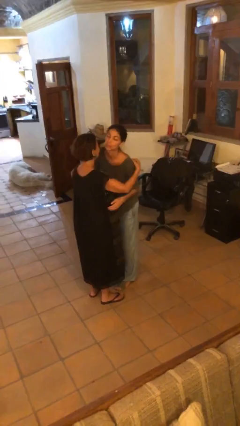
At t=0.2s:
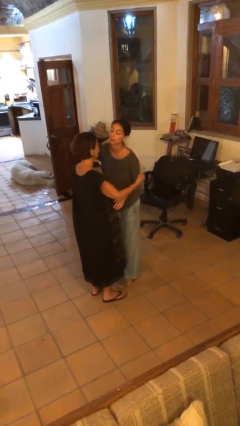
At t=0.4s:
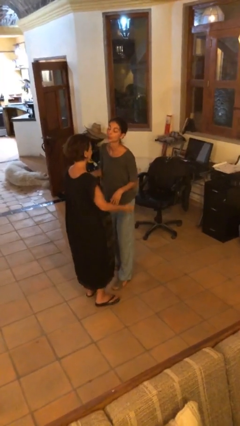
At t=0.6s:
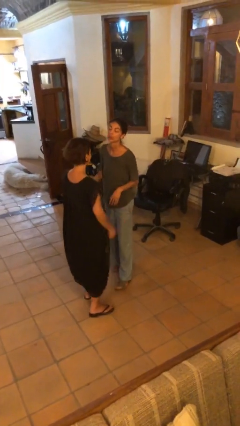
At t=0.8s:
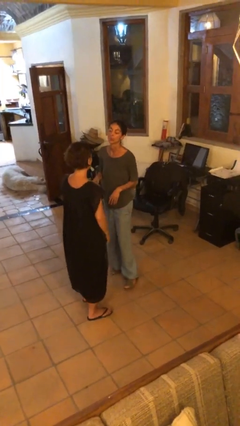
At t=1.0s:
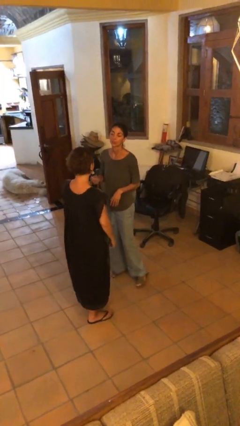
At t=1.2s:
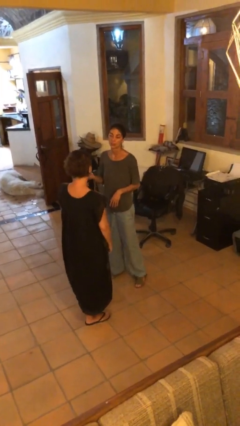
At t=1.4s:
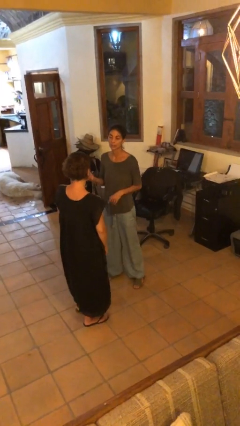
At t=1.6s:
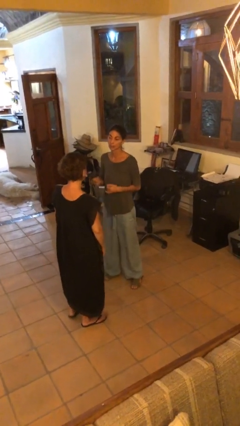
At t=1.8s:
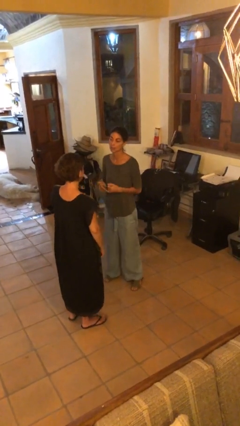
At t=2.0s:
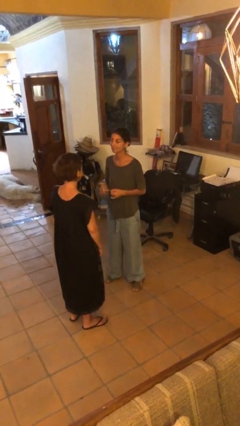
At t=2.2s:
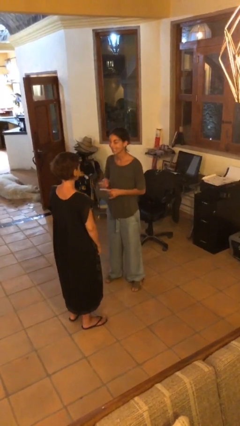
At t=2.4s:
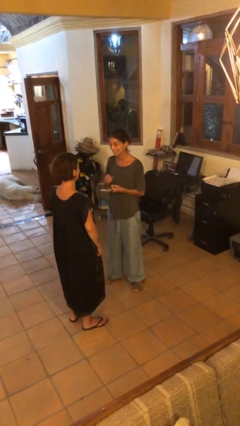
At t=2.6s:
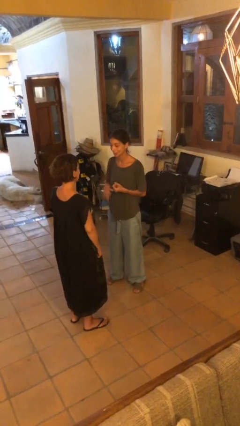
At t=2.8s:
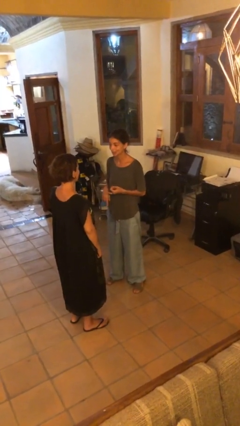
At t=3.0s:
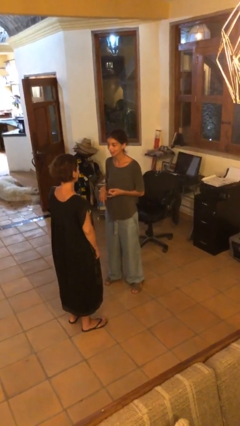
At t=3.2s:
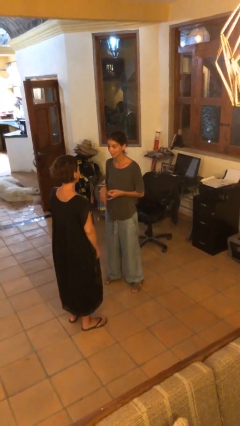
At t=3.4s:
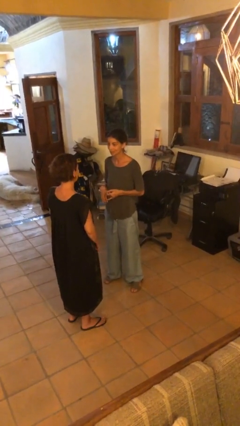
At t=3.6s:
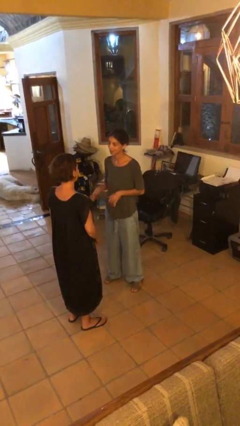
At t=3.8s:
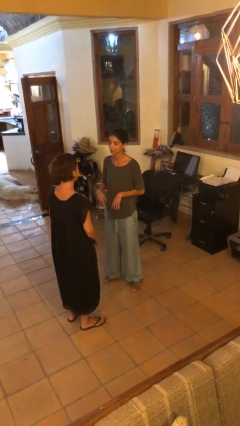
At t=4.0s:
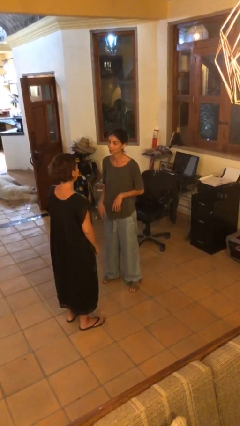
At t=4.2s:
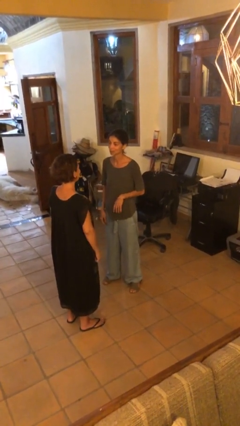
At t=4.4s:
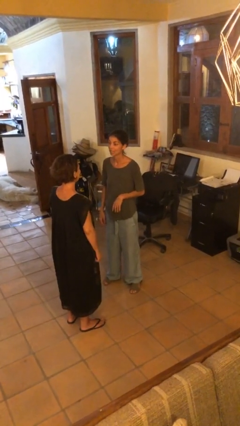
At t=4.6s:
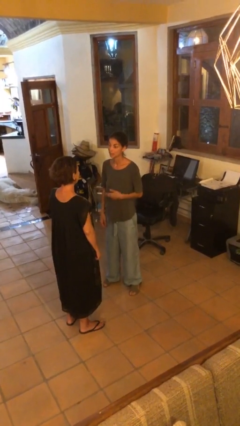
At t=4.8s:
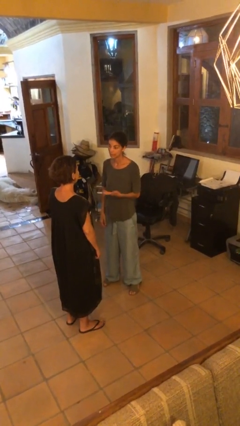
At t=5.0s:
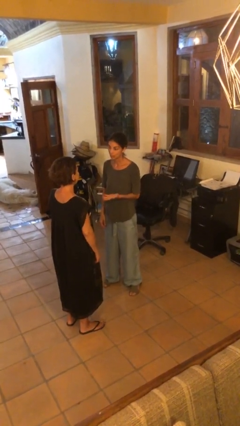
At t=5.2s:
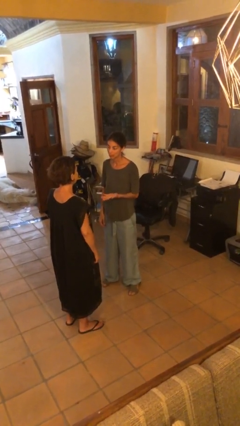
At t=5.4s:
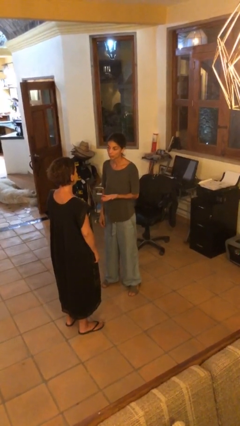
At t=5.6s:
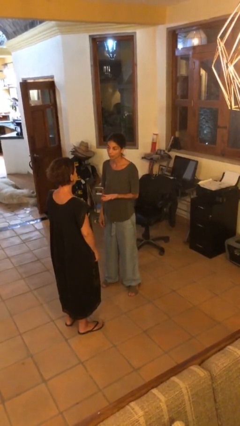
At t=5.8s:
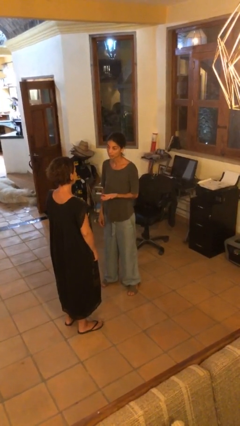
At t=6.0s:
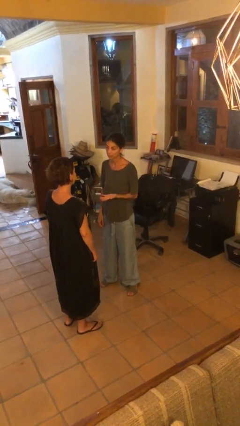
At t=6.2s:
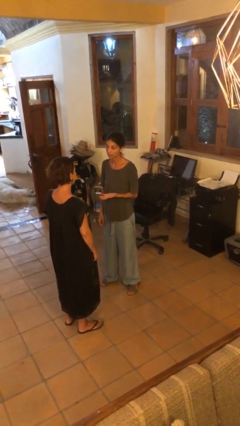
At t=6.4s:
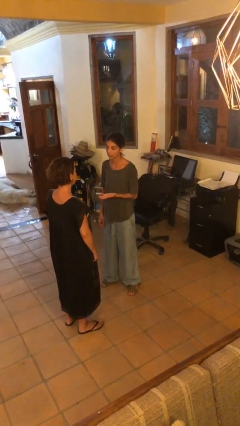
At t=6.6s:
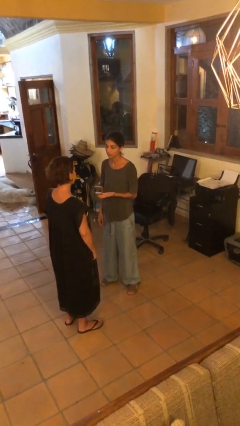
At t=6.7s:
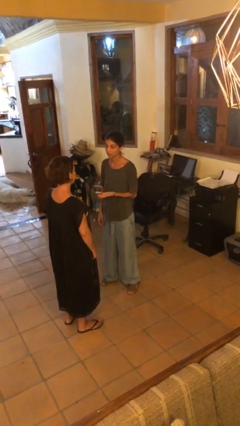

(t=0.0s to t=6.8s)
person talks to person

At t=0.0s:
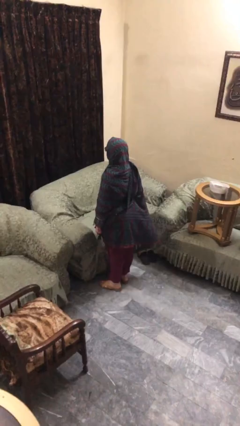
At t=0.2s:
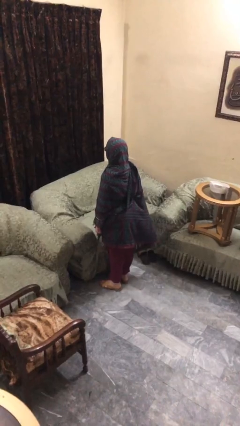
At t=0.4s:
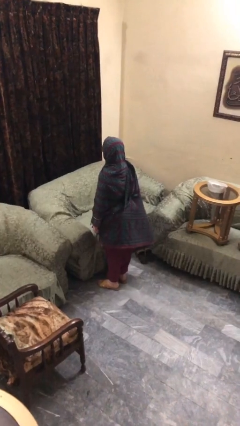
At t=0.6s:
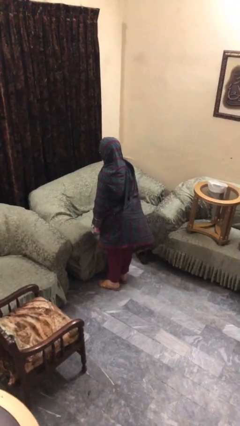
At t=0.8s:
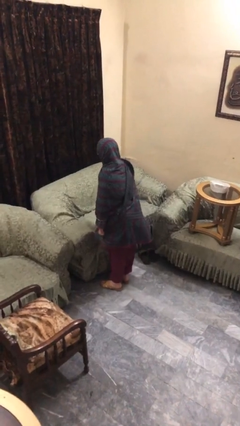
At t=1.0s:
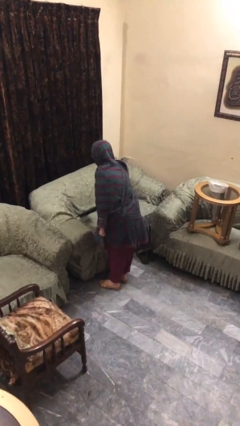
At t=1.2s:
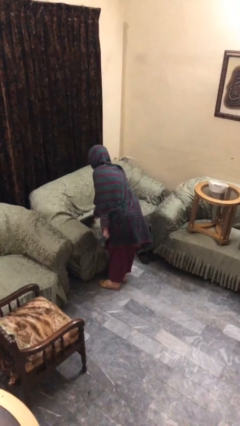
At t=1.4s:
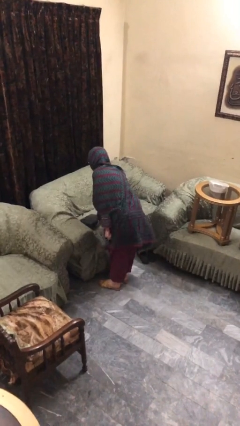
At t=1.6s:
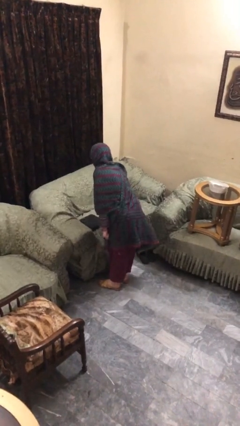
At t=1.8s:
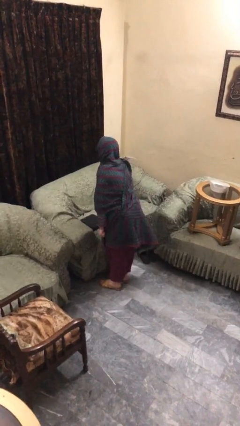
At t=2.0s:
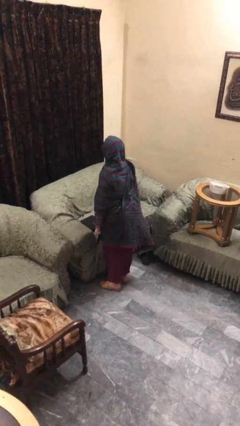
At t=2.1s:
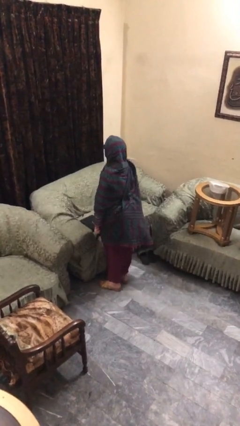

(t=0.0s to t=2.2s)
person puts down object on couch

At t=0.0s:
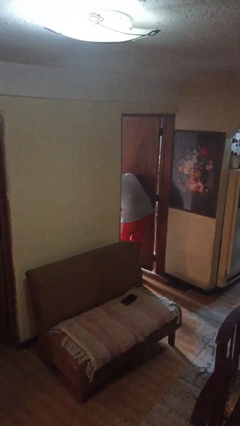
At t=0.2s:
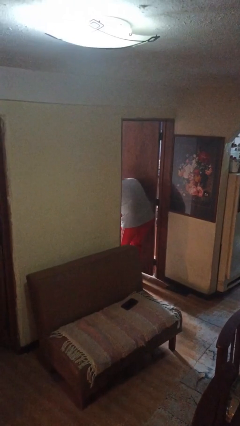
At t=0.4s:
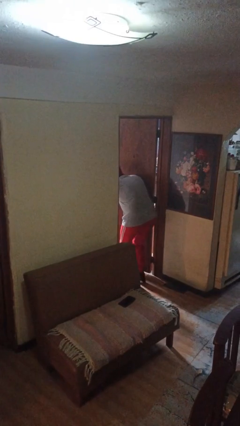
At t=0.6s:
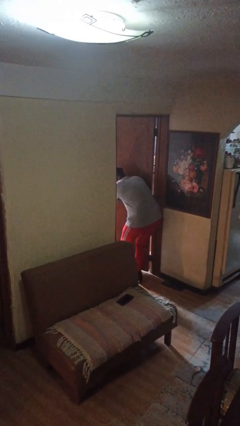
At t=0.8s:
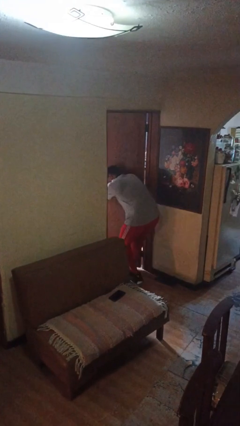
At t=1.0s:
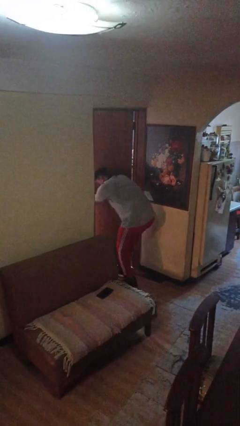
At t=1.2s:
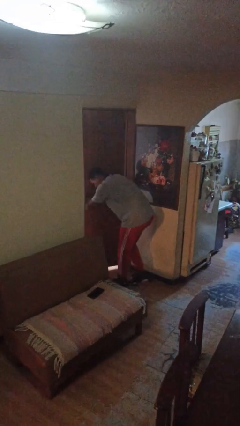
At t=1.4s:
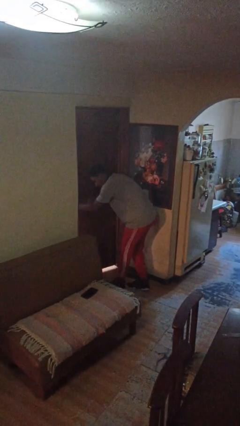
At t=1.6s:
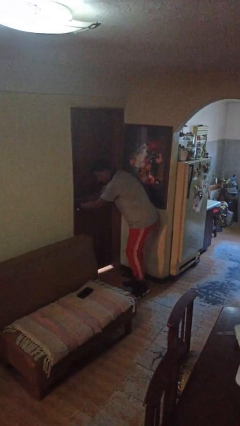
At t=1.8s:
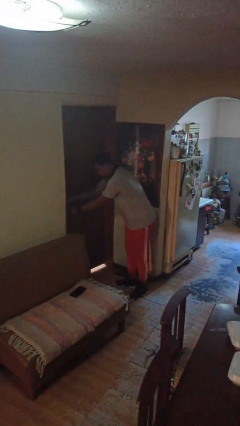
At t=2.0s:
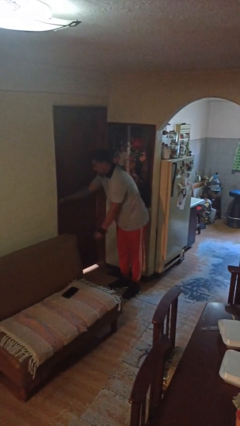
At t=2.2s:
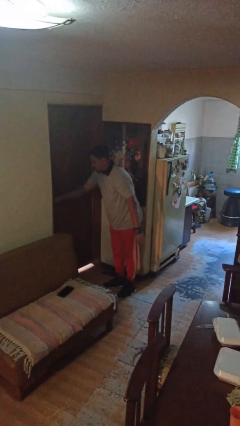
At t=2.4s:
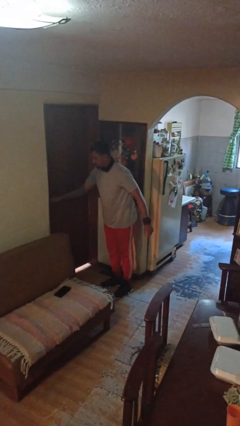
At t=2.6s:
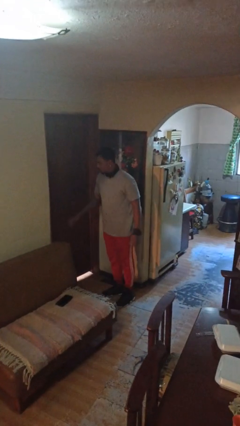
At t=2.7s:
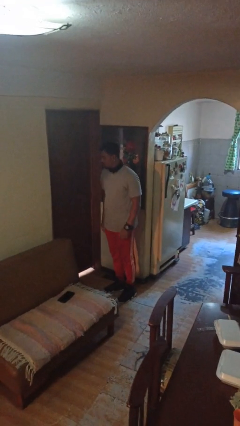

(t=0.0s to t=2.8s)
person closes facility door

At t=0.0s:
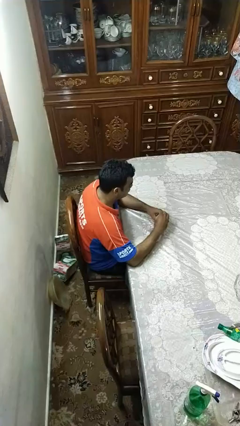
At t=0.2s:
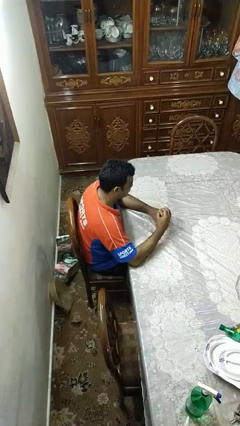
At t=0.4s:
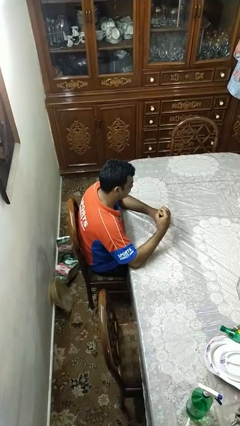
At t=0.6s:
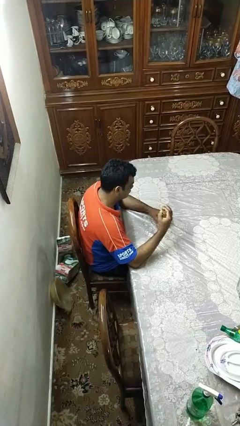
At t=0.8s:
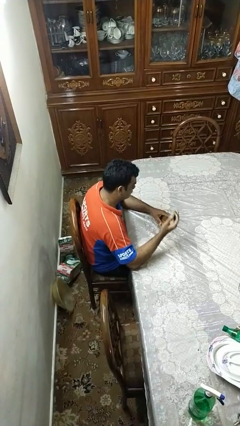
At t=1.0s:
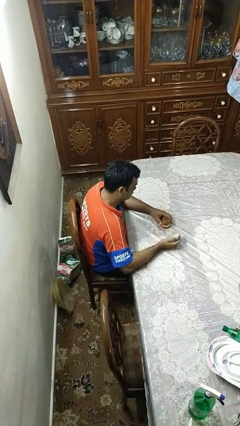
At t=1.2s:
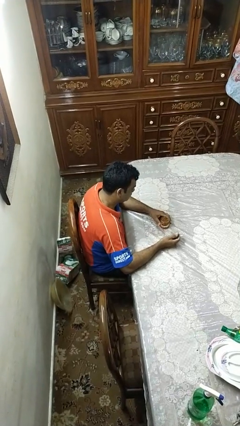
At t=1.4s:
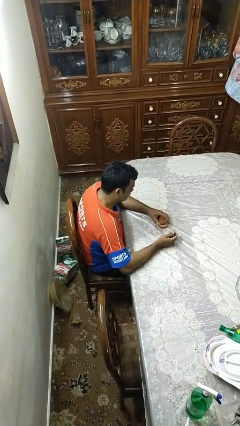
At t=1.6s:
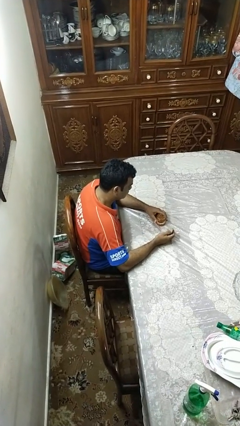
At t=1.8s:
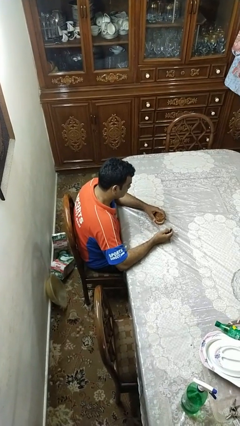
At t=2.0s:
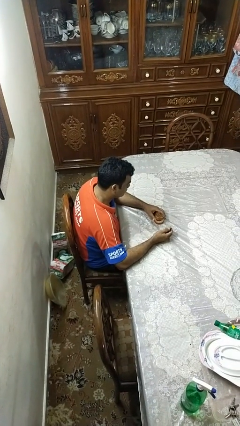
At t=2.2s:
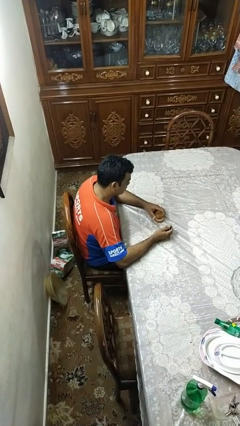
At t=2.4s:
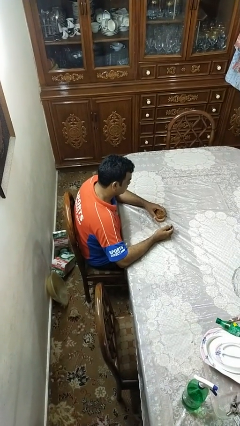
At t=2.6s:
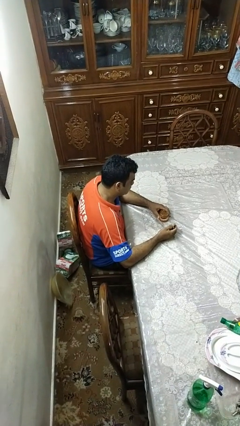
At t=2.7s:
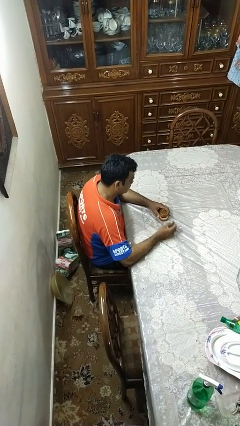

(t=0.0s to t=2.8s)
person opens jar

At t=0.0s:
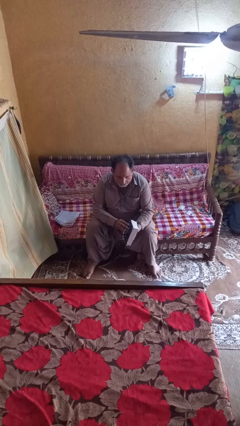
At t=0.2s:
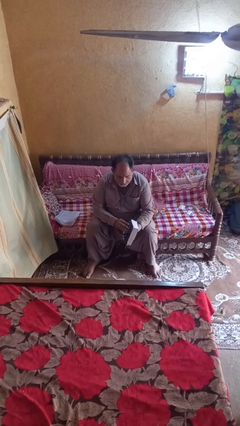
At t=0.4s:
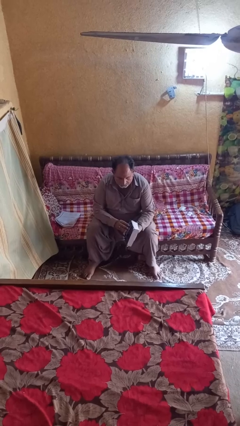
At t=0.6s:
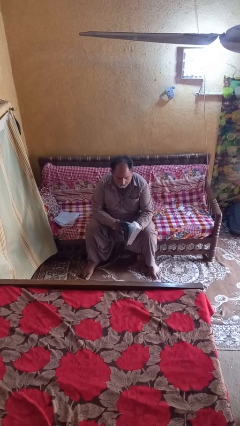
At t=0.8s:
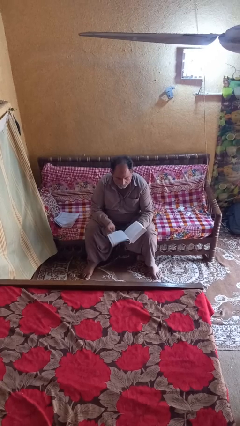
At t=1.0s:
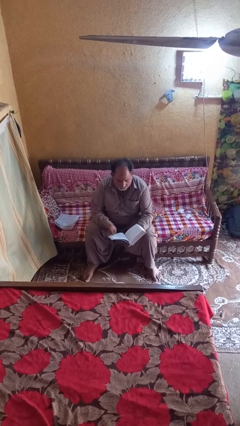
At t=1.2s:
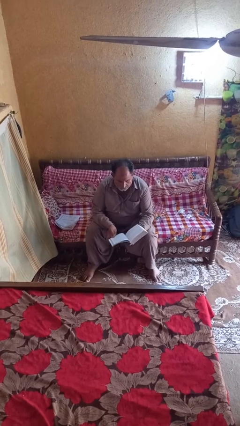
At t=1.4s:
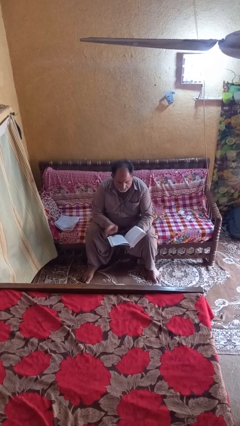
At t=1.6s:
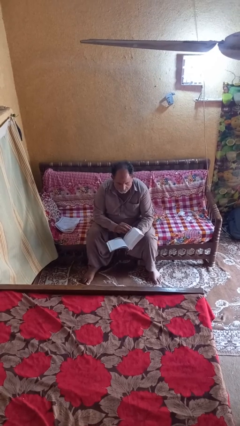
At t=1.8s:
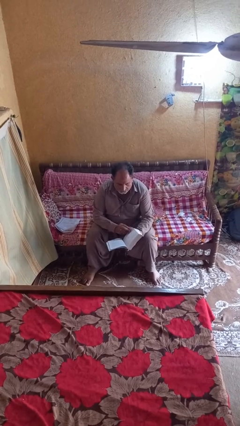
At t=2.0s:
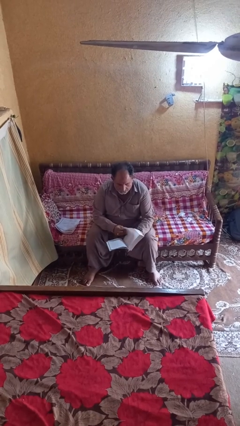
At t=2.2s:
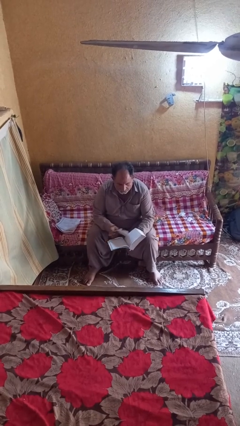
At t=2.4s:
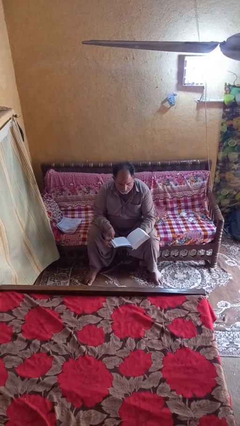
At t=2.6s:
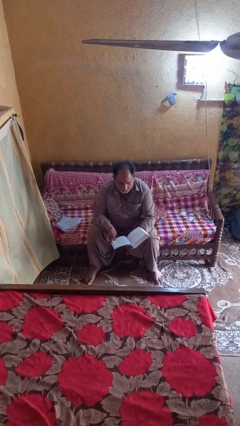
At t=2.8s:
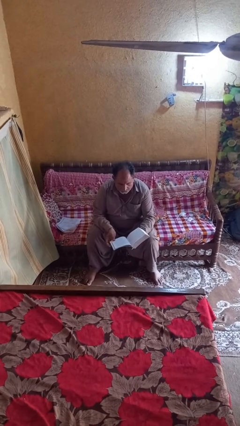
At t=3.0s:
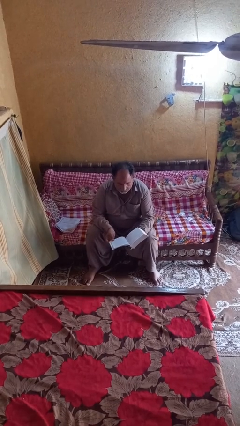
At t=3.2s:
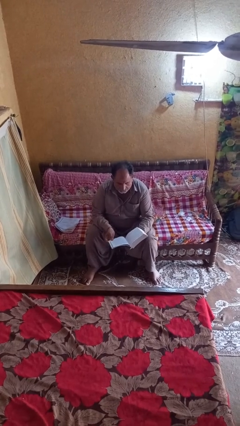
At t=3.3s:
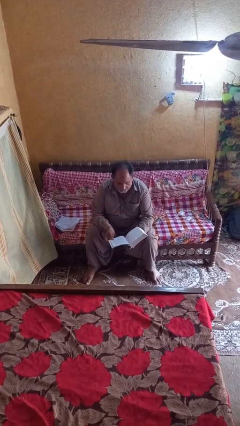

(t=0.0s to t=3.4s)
person reads book
